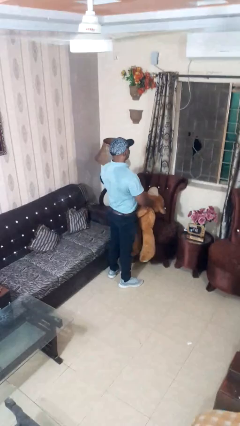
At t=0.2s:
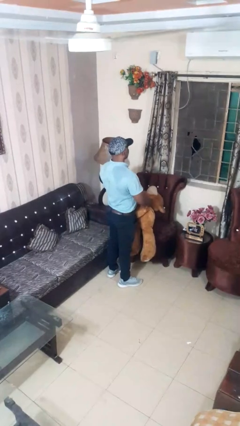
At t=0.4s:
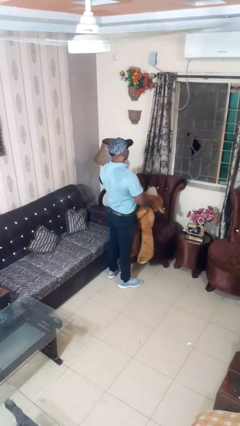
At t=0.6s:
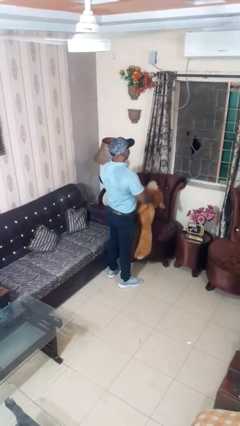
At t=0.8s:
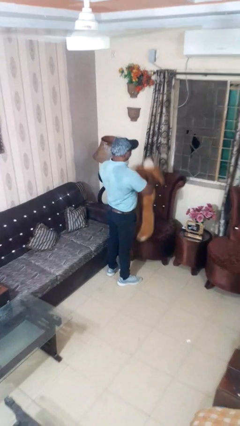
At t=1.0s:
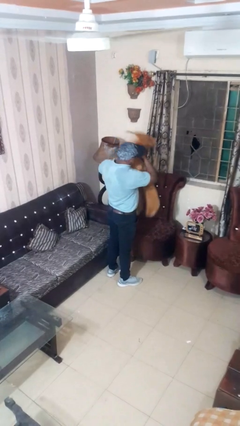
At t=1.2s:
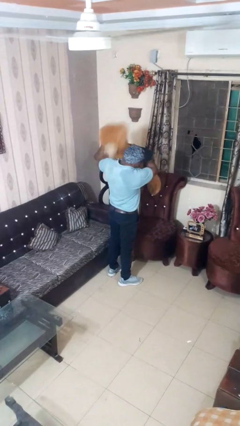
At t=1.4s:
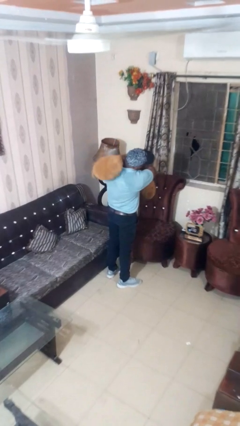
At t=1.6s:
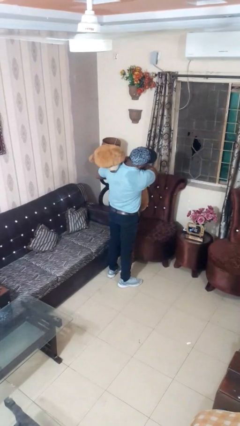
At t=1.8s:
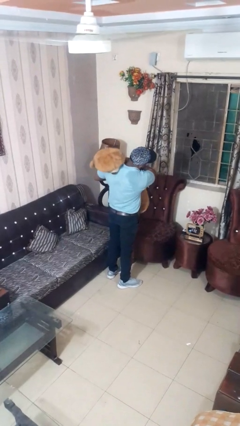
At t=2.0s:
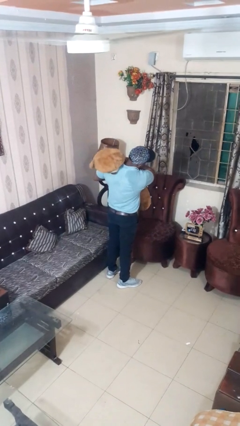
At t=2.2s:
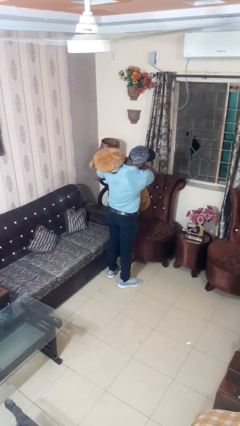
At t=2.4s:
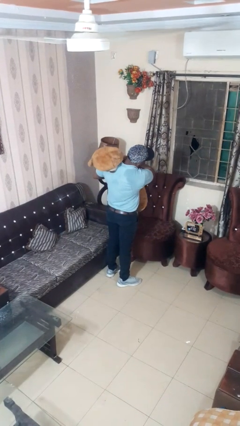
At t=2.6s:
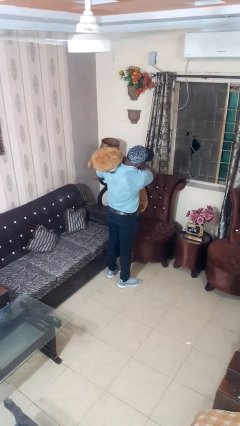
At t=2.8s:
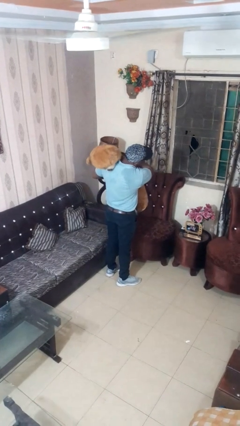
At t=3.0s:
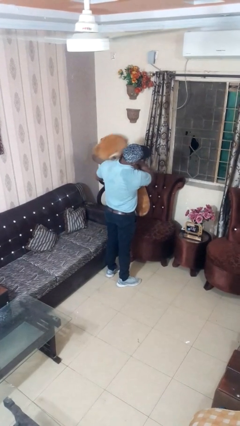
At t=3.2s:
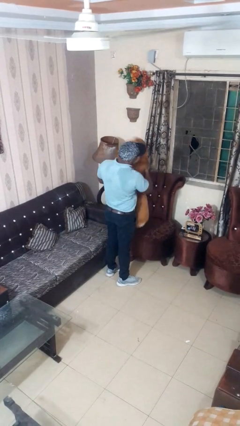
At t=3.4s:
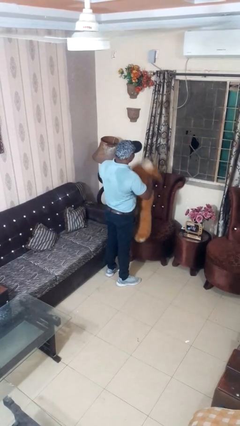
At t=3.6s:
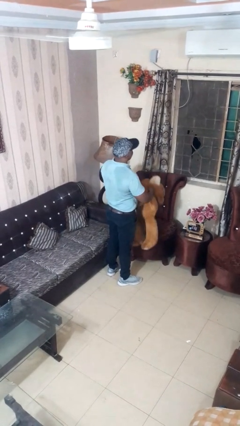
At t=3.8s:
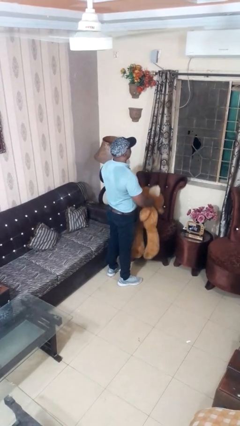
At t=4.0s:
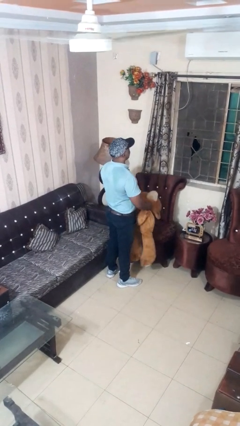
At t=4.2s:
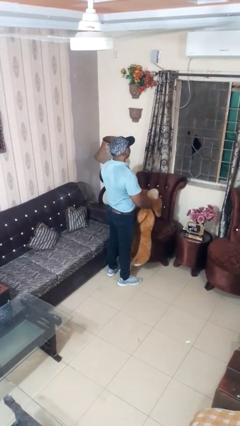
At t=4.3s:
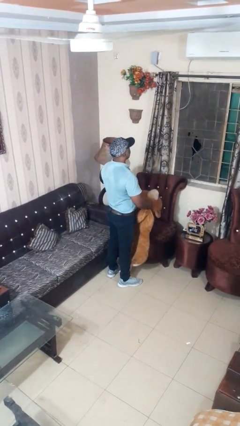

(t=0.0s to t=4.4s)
person hugs stuffed animal

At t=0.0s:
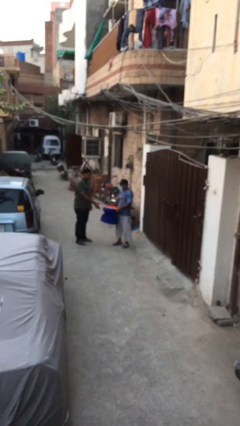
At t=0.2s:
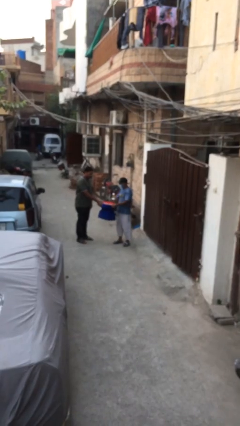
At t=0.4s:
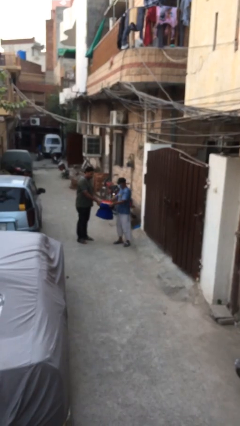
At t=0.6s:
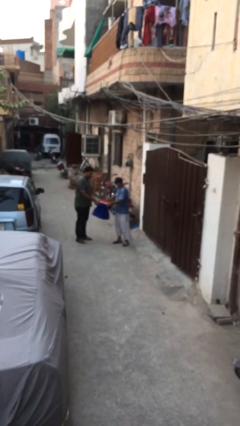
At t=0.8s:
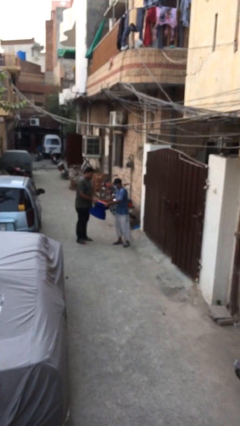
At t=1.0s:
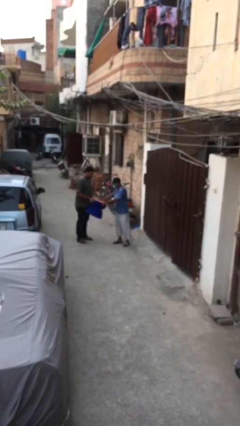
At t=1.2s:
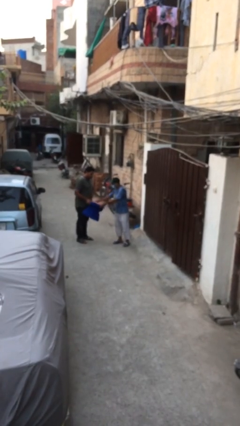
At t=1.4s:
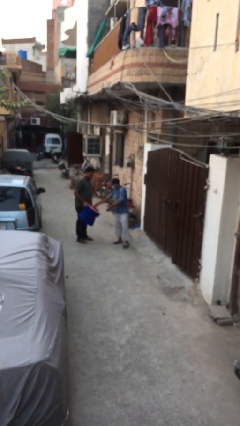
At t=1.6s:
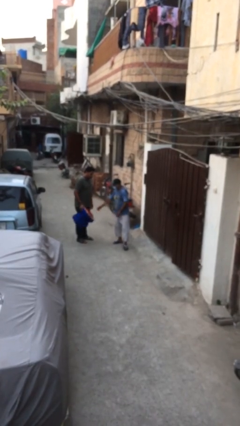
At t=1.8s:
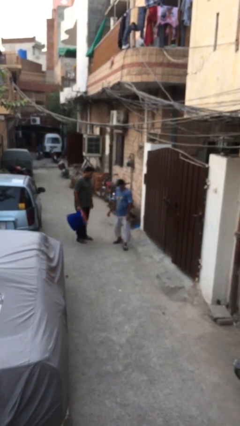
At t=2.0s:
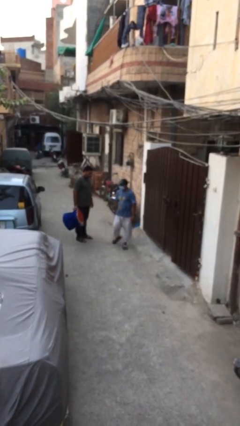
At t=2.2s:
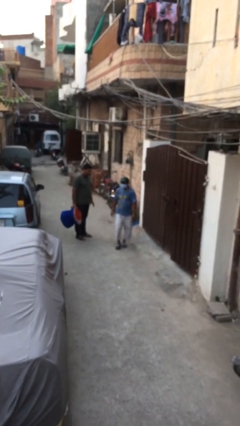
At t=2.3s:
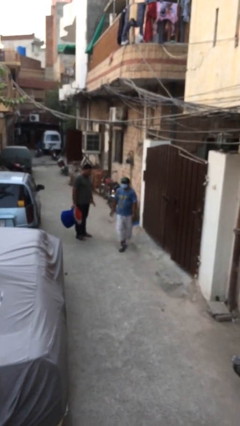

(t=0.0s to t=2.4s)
person transfers object to person

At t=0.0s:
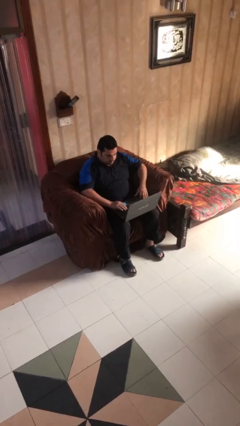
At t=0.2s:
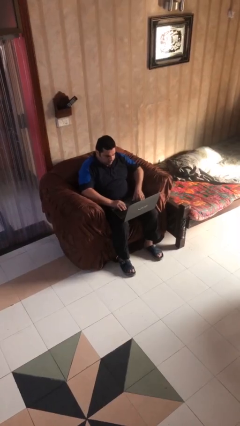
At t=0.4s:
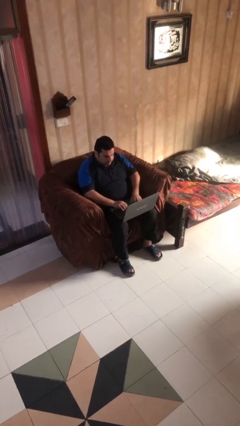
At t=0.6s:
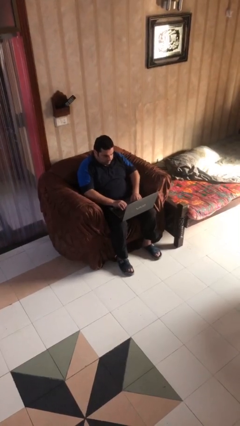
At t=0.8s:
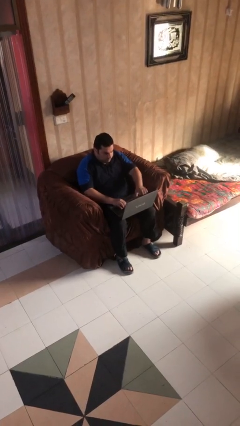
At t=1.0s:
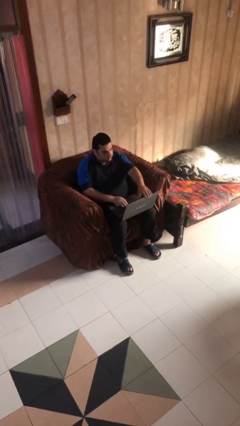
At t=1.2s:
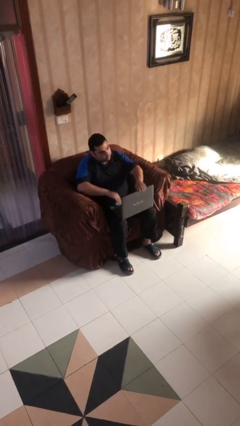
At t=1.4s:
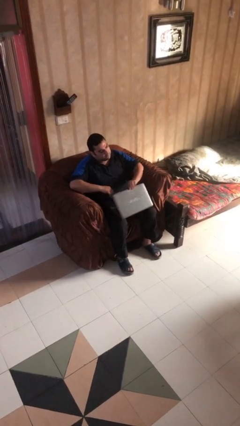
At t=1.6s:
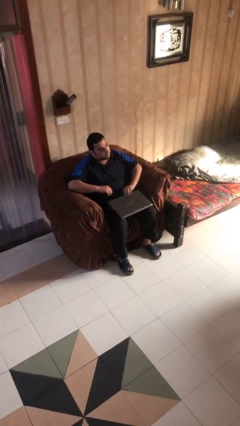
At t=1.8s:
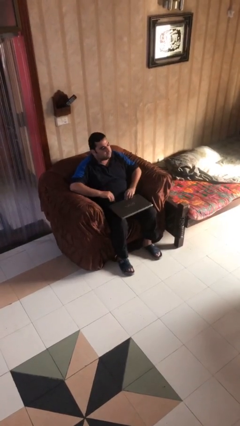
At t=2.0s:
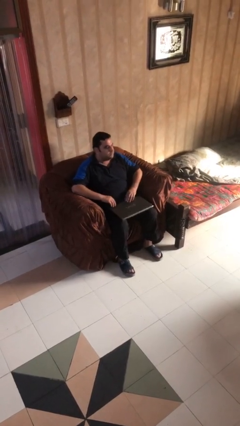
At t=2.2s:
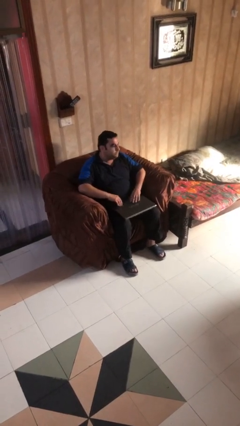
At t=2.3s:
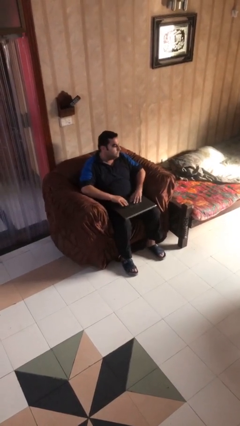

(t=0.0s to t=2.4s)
person closes laptop

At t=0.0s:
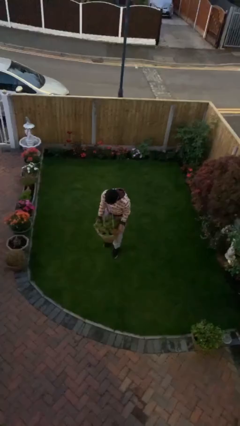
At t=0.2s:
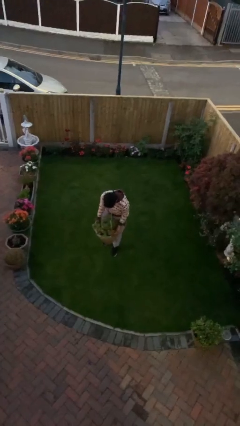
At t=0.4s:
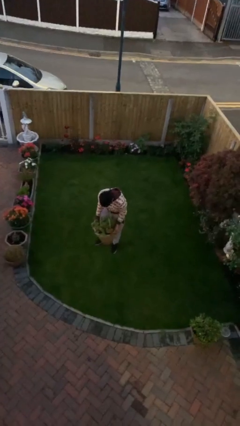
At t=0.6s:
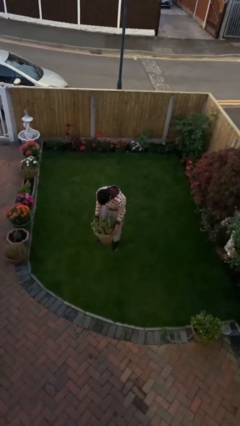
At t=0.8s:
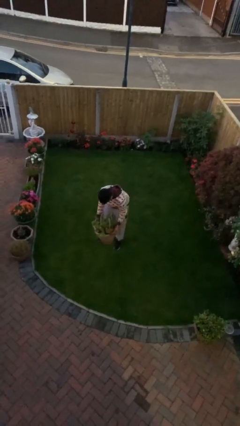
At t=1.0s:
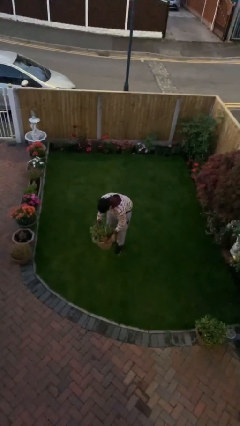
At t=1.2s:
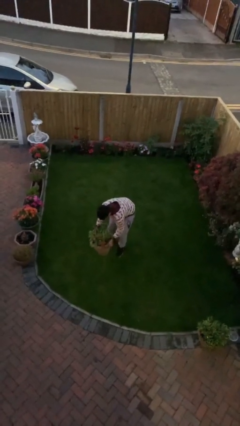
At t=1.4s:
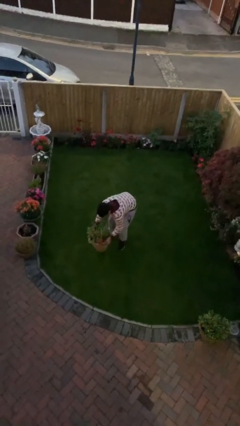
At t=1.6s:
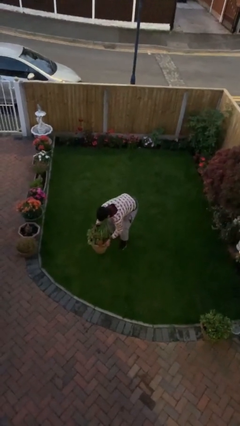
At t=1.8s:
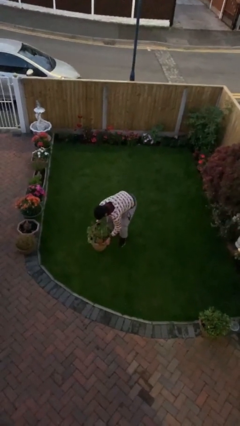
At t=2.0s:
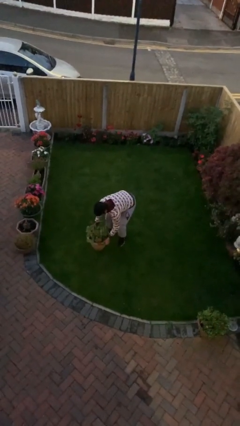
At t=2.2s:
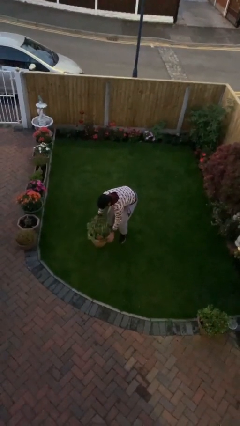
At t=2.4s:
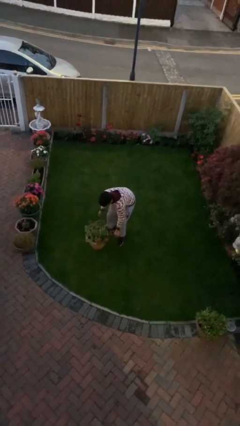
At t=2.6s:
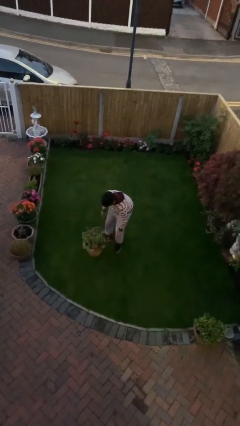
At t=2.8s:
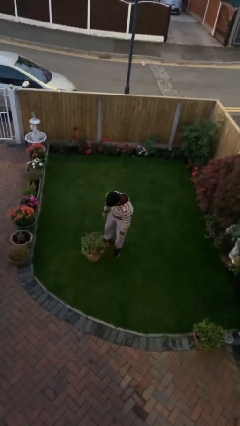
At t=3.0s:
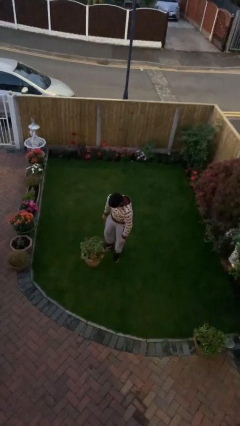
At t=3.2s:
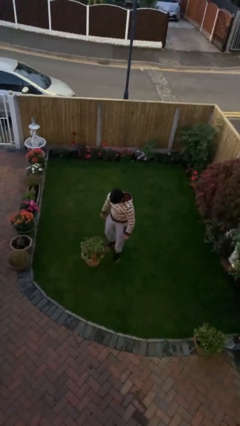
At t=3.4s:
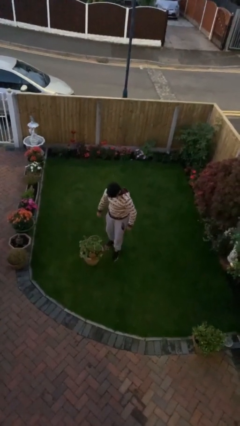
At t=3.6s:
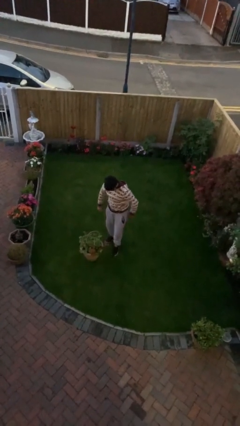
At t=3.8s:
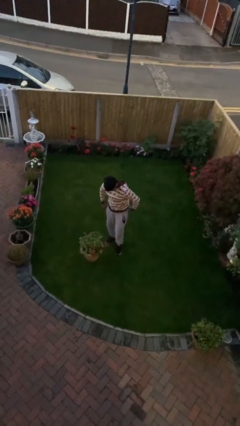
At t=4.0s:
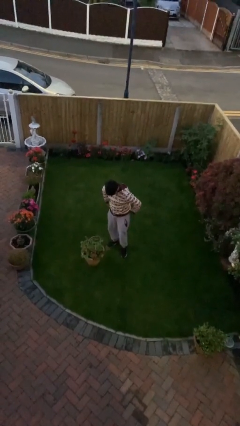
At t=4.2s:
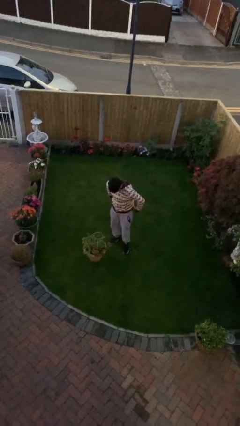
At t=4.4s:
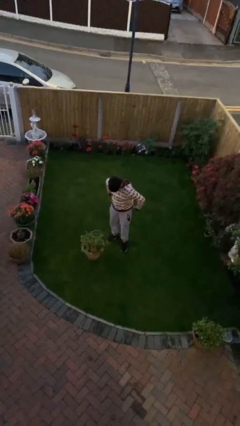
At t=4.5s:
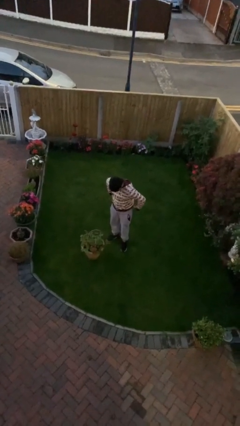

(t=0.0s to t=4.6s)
person puts down object on floor

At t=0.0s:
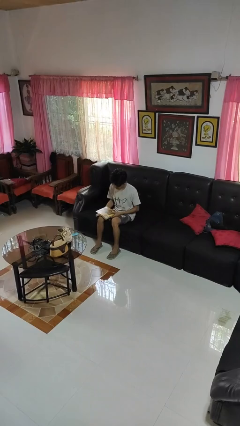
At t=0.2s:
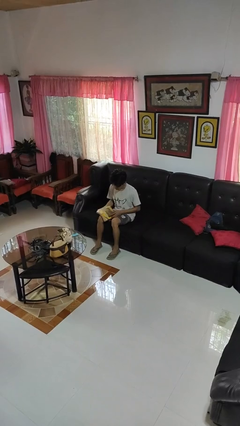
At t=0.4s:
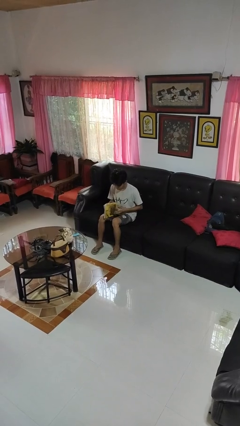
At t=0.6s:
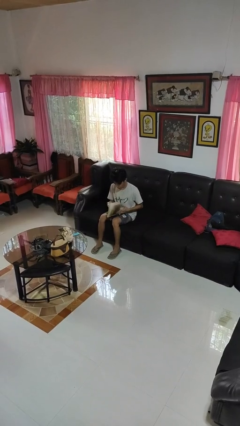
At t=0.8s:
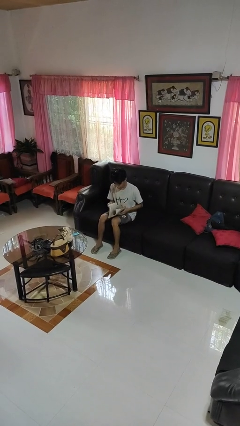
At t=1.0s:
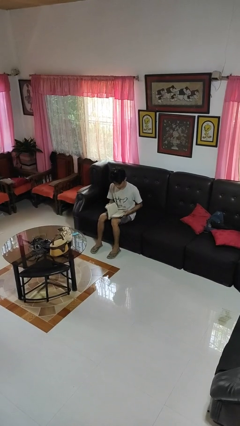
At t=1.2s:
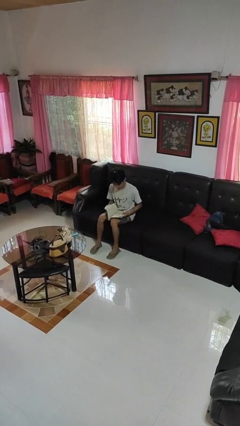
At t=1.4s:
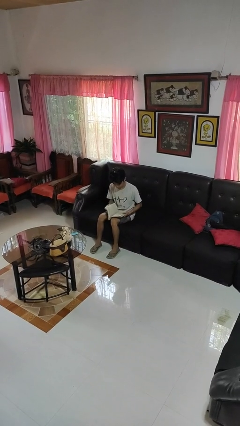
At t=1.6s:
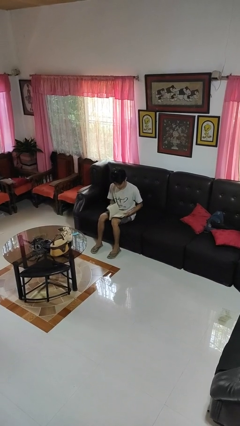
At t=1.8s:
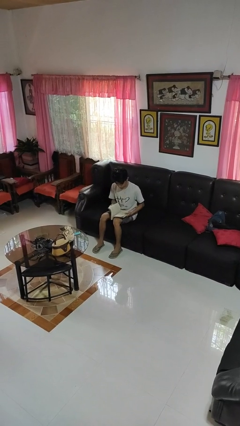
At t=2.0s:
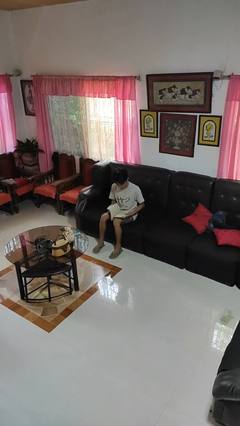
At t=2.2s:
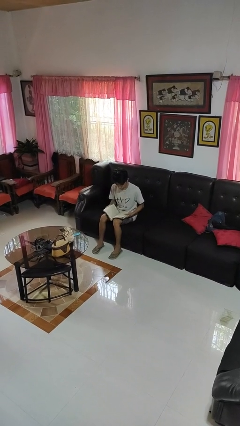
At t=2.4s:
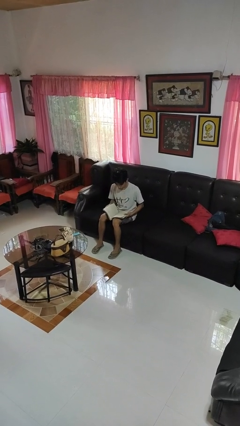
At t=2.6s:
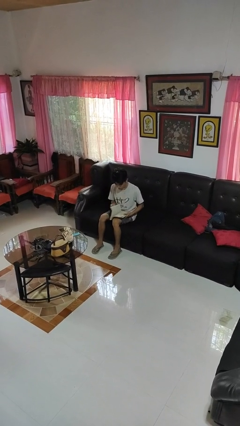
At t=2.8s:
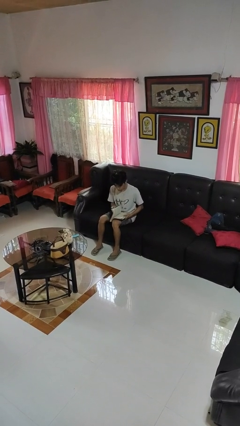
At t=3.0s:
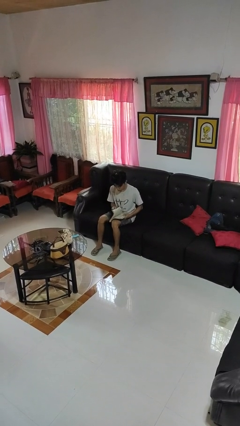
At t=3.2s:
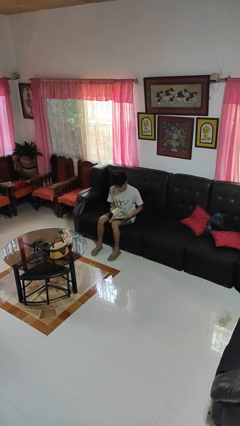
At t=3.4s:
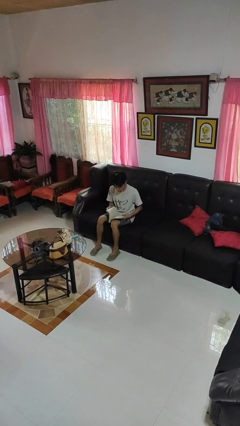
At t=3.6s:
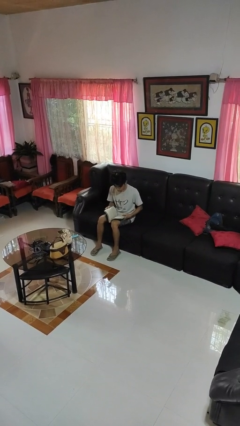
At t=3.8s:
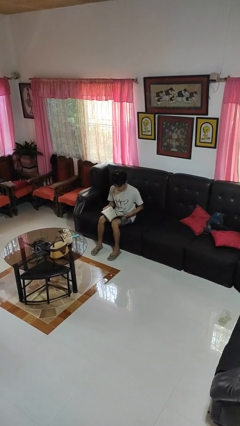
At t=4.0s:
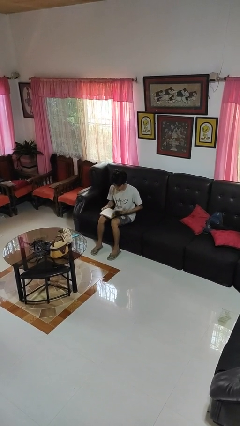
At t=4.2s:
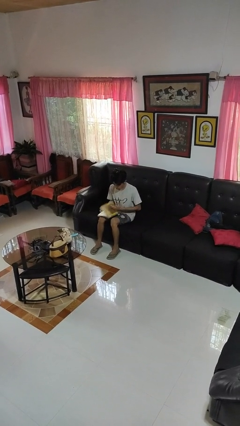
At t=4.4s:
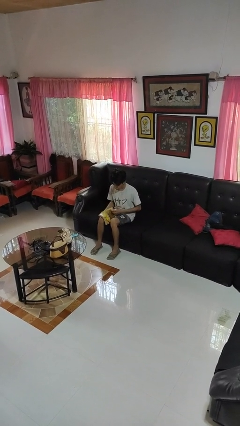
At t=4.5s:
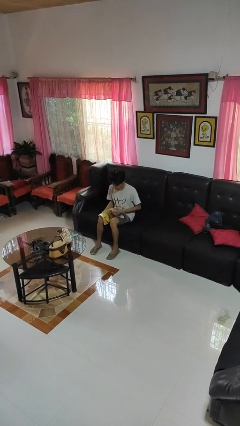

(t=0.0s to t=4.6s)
person reads book
